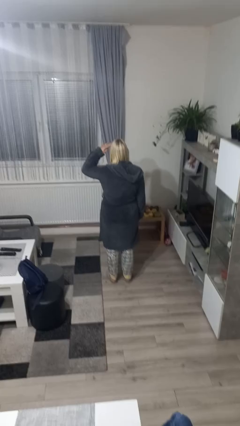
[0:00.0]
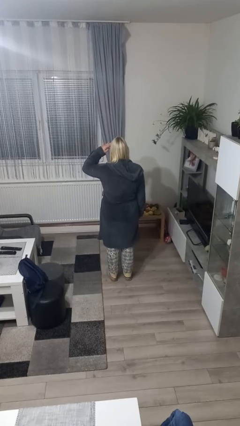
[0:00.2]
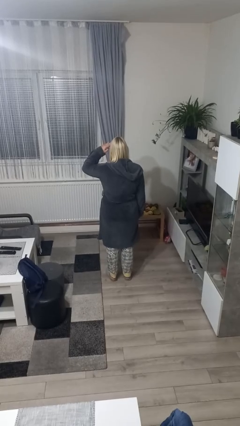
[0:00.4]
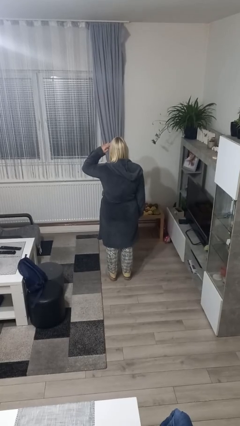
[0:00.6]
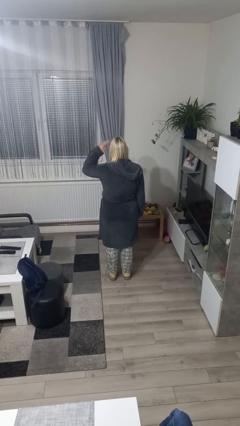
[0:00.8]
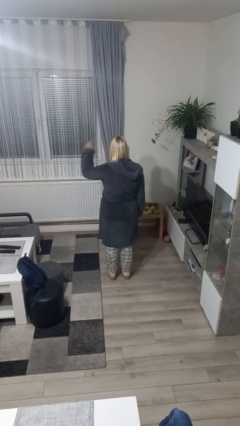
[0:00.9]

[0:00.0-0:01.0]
person salutes

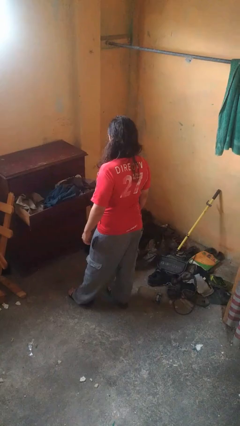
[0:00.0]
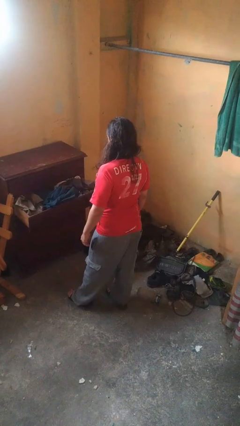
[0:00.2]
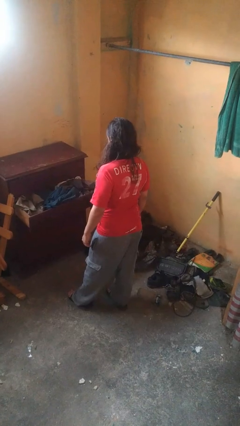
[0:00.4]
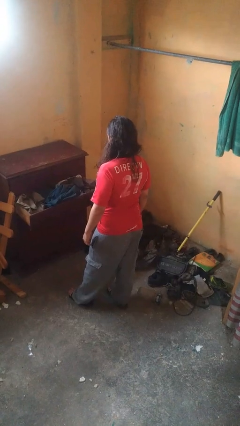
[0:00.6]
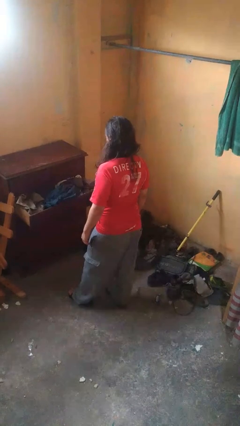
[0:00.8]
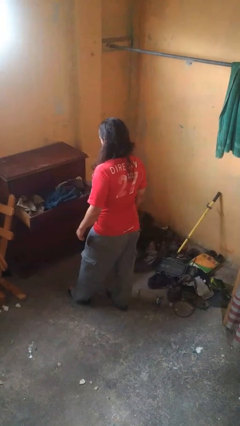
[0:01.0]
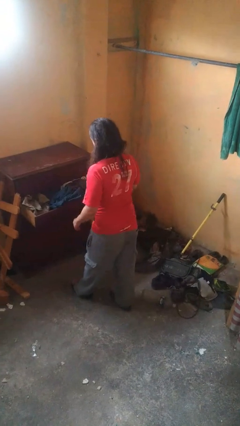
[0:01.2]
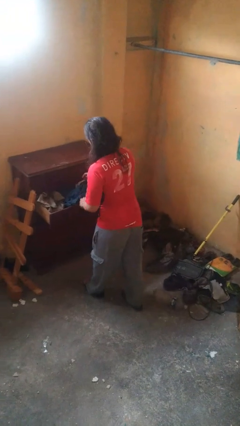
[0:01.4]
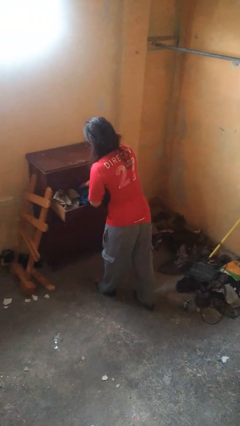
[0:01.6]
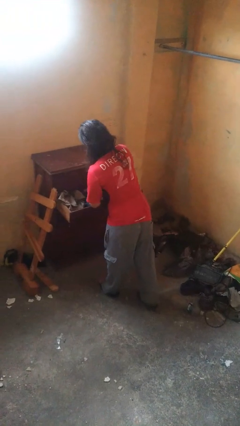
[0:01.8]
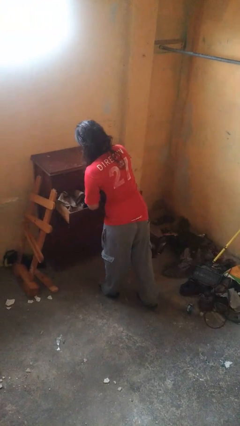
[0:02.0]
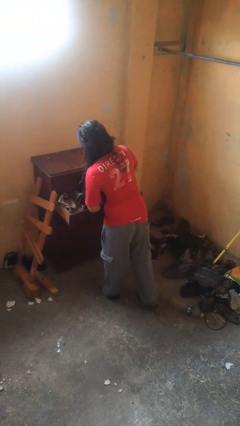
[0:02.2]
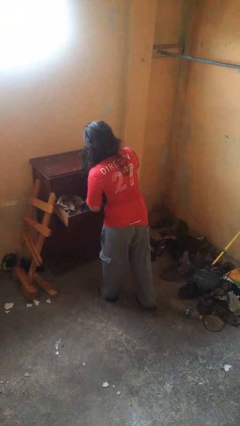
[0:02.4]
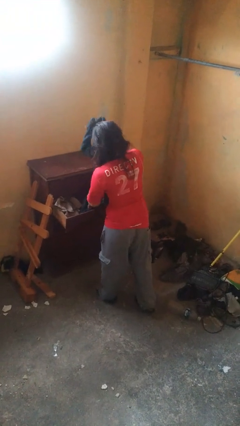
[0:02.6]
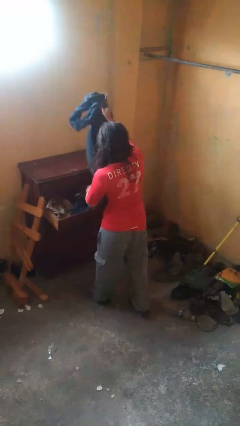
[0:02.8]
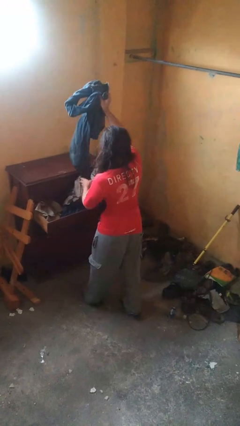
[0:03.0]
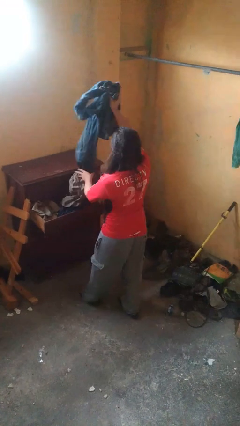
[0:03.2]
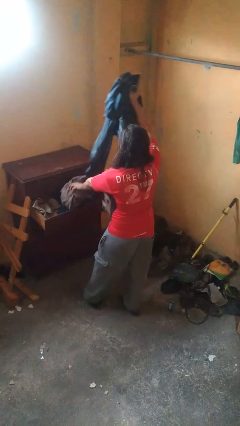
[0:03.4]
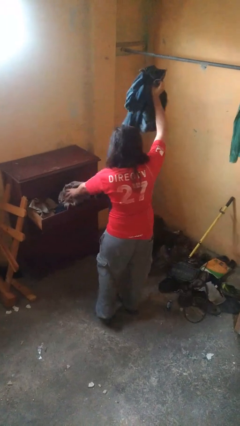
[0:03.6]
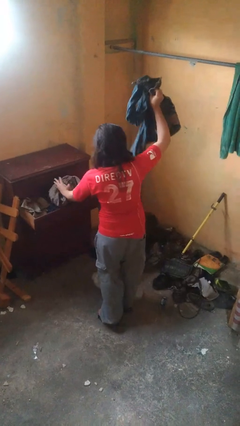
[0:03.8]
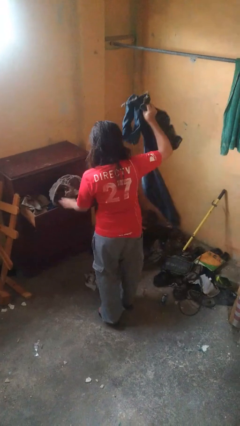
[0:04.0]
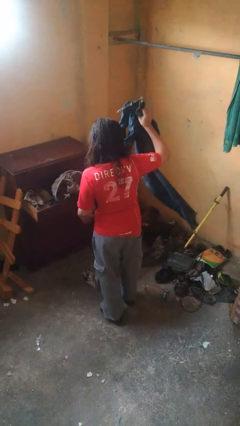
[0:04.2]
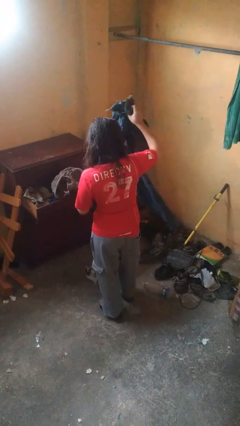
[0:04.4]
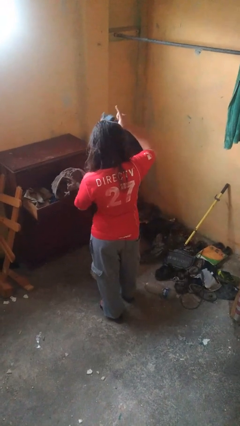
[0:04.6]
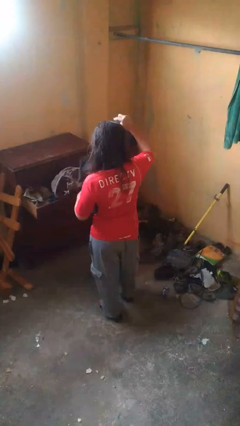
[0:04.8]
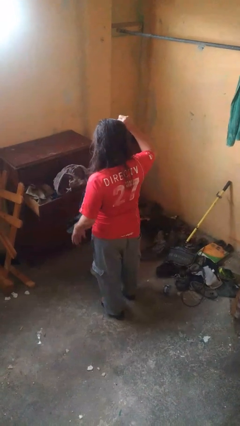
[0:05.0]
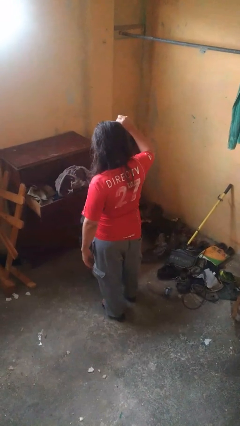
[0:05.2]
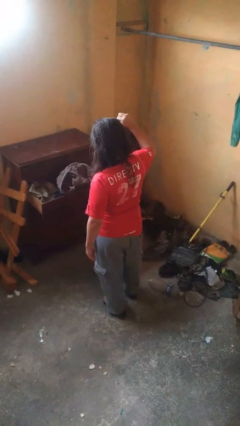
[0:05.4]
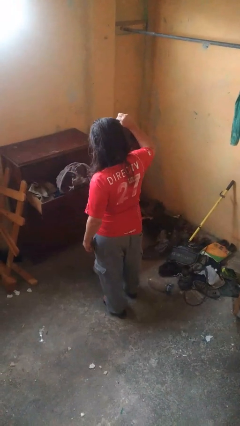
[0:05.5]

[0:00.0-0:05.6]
person takes clothes from dresser

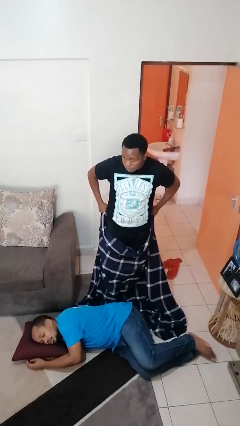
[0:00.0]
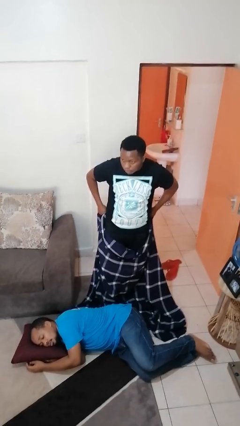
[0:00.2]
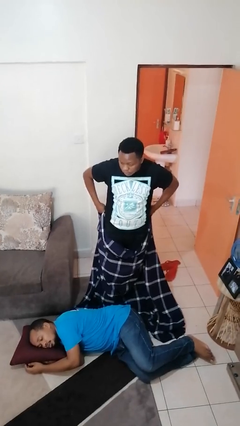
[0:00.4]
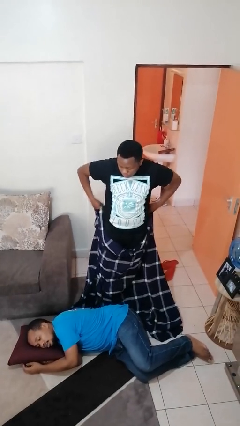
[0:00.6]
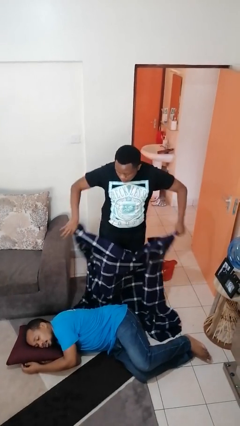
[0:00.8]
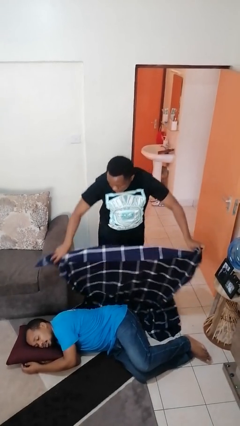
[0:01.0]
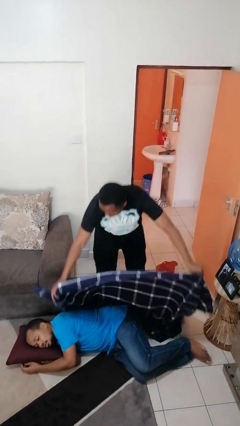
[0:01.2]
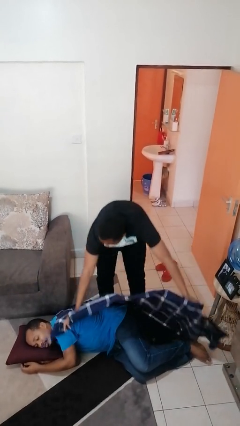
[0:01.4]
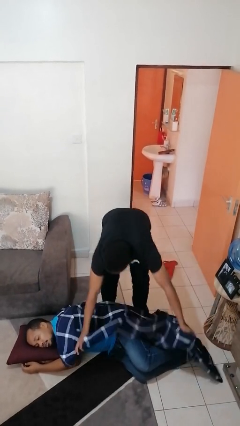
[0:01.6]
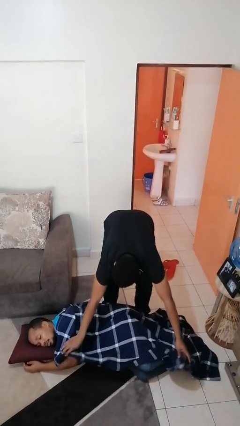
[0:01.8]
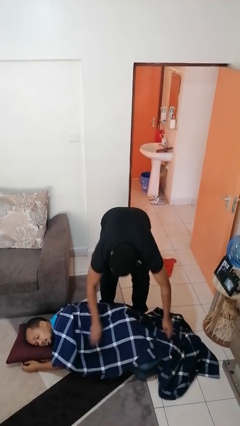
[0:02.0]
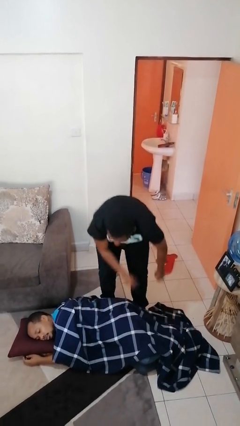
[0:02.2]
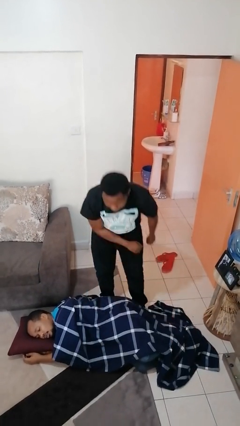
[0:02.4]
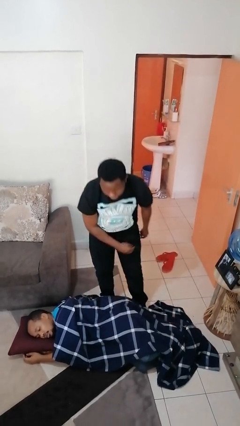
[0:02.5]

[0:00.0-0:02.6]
person covers friend with blanket

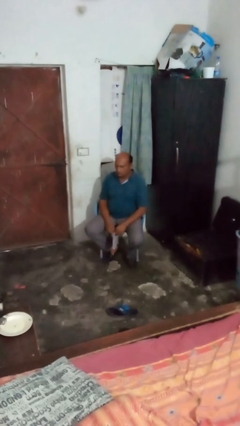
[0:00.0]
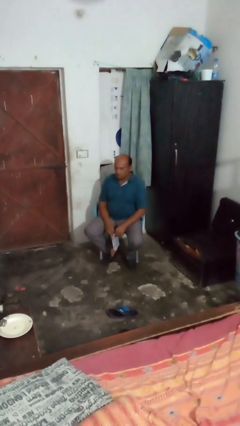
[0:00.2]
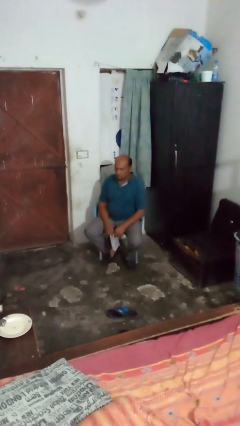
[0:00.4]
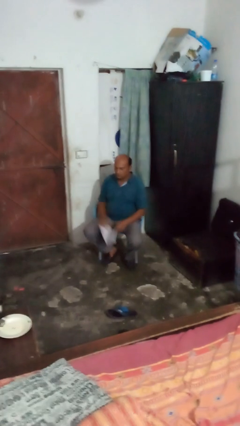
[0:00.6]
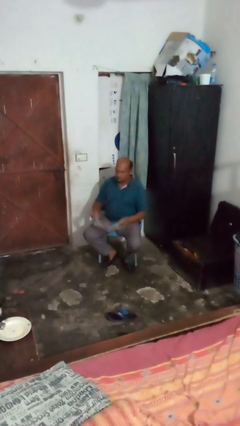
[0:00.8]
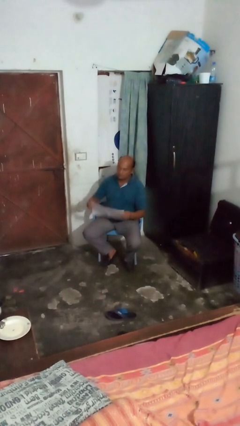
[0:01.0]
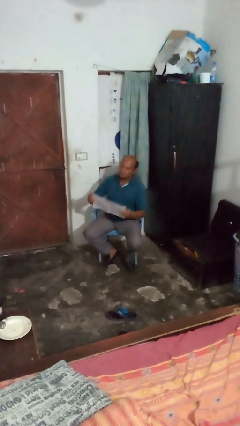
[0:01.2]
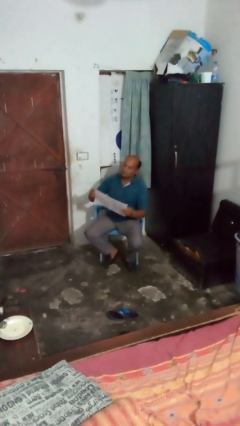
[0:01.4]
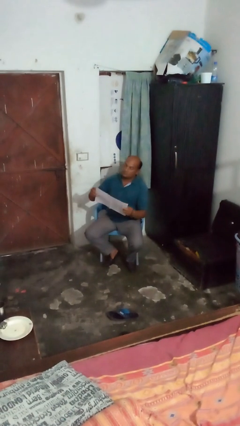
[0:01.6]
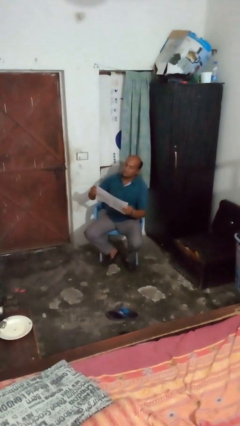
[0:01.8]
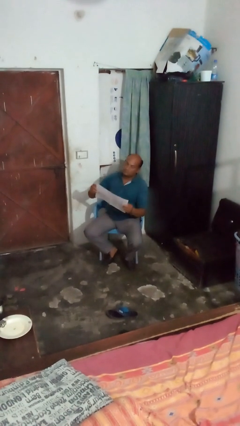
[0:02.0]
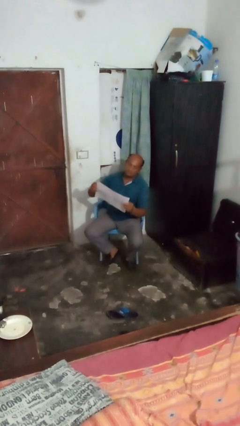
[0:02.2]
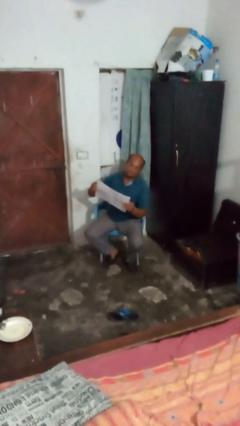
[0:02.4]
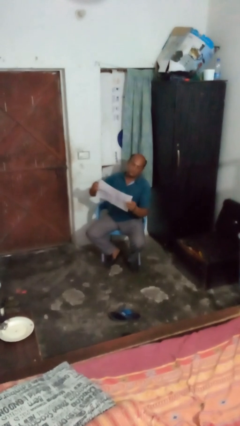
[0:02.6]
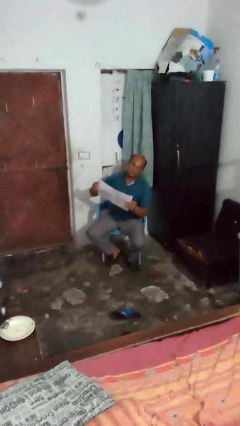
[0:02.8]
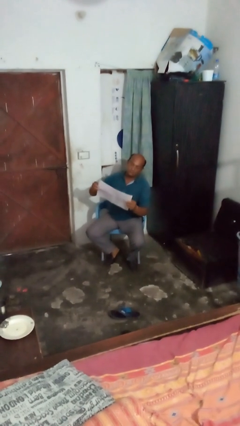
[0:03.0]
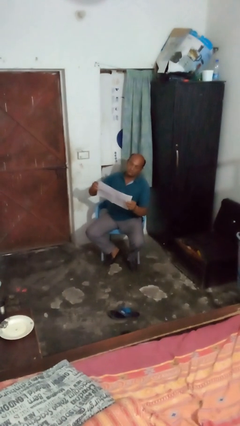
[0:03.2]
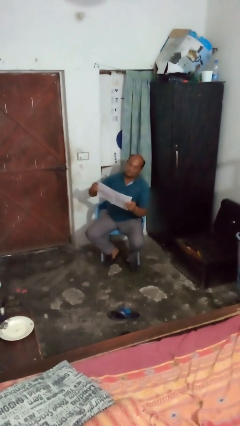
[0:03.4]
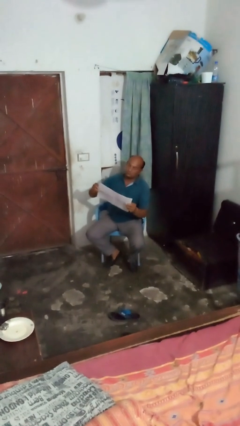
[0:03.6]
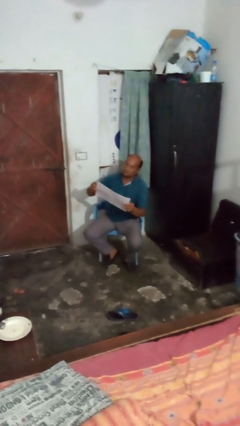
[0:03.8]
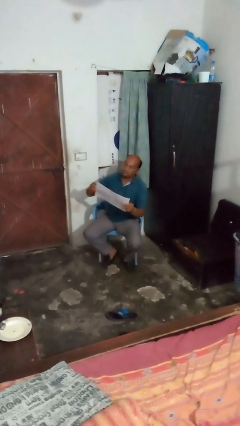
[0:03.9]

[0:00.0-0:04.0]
person reads newspaper

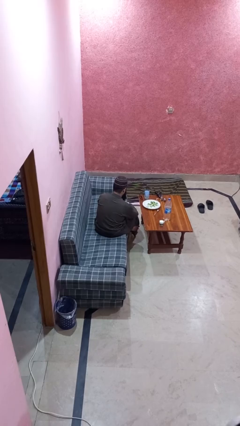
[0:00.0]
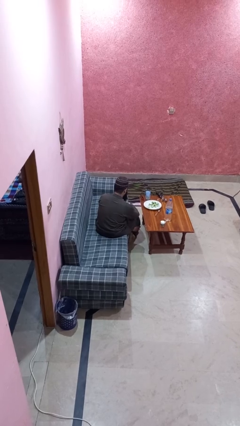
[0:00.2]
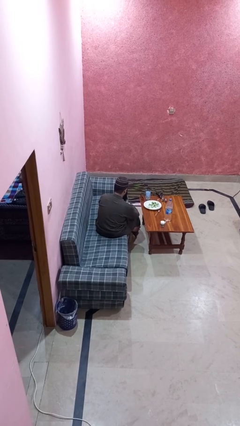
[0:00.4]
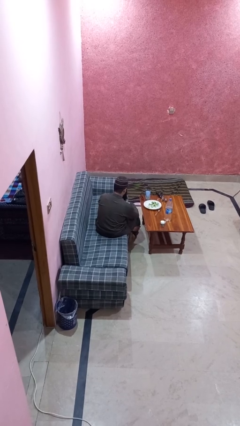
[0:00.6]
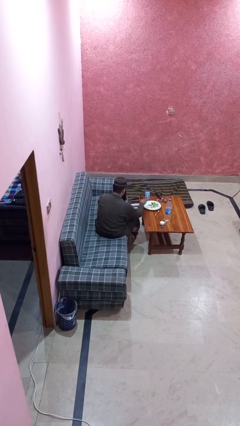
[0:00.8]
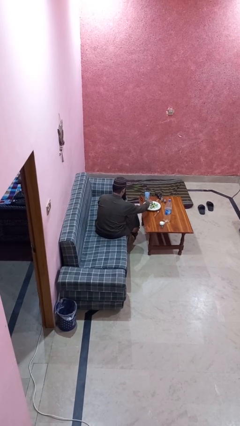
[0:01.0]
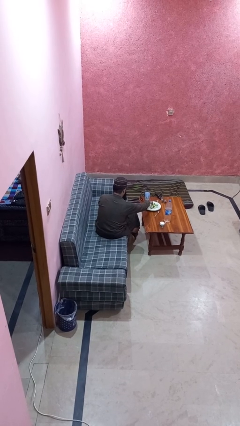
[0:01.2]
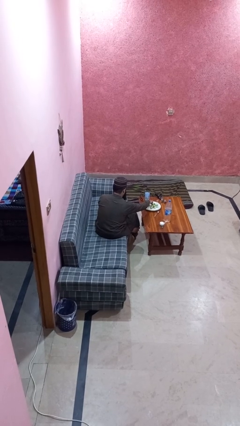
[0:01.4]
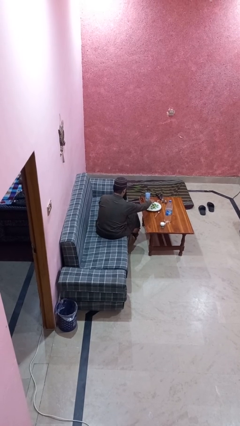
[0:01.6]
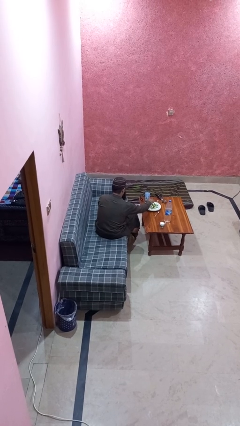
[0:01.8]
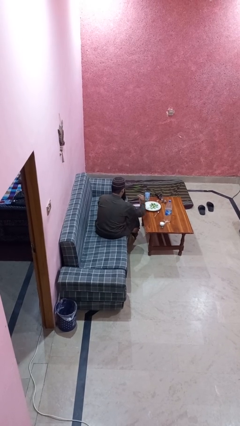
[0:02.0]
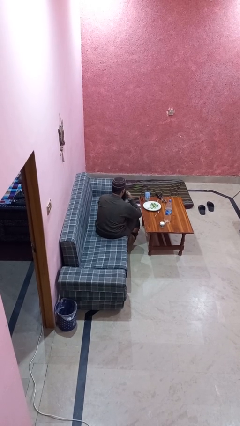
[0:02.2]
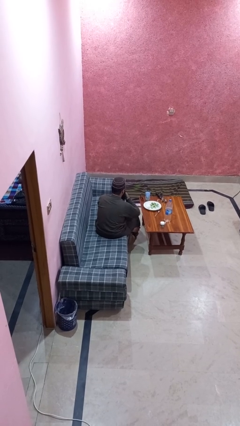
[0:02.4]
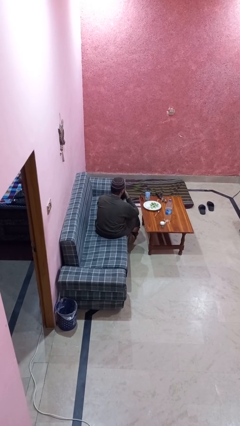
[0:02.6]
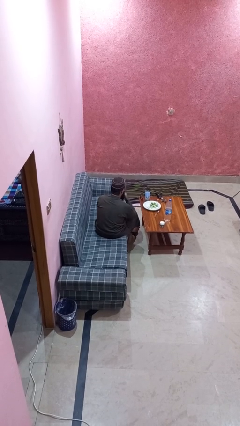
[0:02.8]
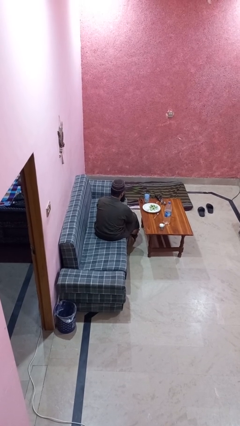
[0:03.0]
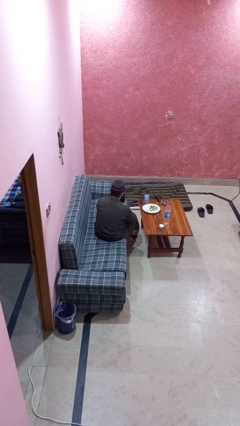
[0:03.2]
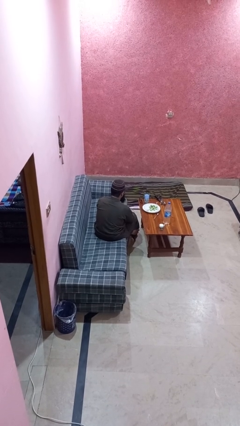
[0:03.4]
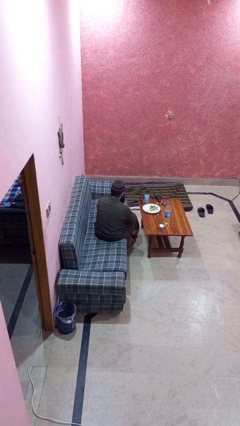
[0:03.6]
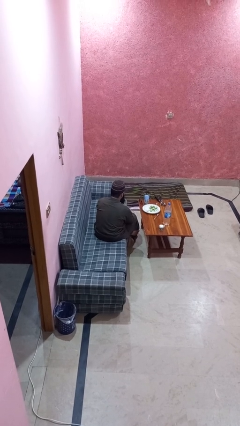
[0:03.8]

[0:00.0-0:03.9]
person eats with hands

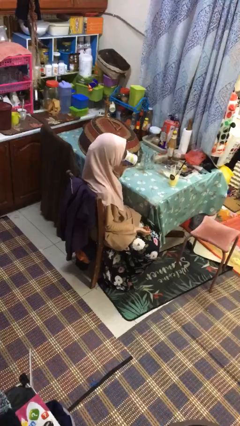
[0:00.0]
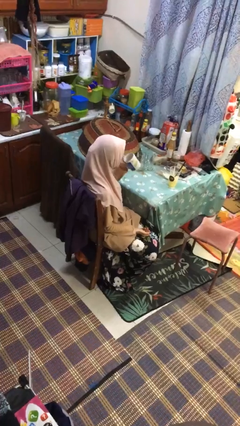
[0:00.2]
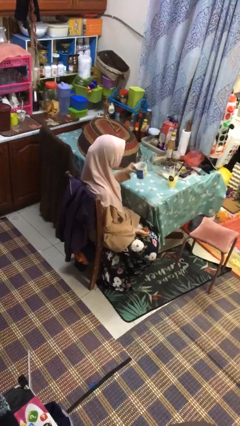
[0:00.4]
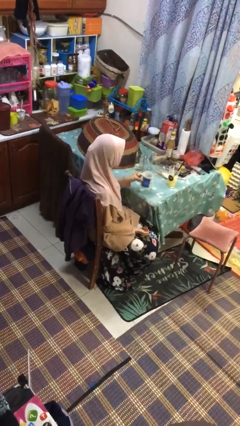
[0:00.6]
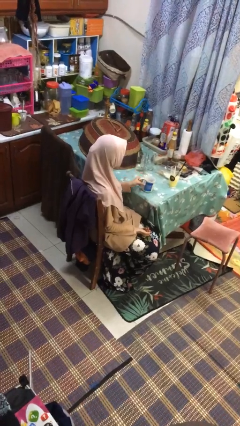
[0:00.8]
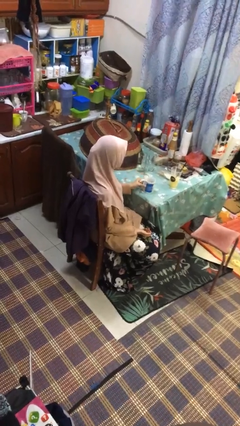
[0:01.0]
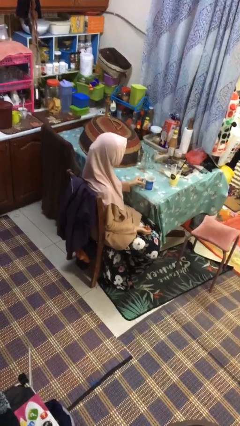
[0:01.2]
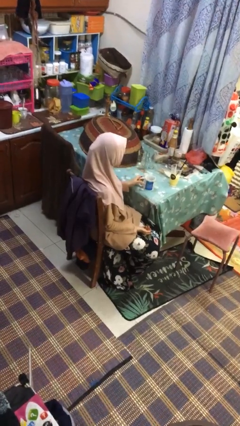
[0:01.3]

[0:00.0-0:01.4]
person puts down object on table
